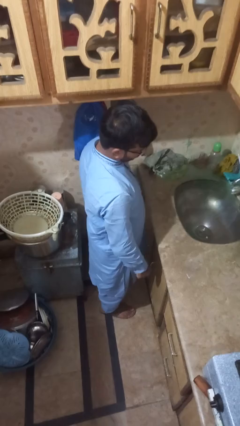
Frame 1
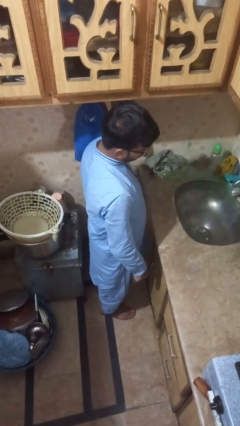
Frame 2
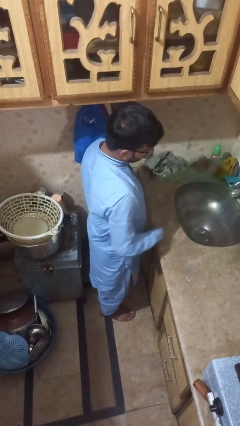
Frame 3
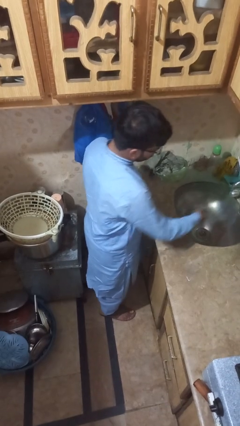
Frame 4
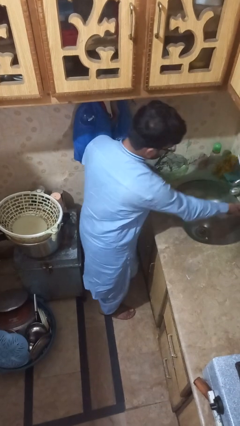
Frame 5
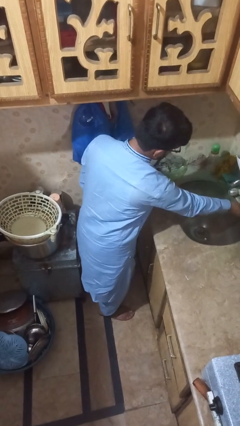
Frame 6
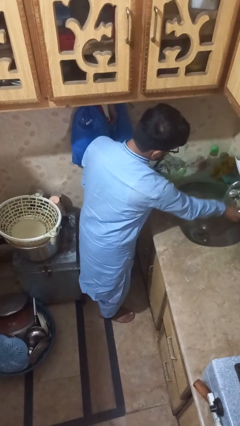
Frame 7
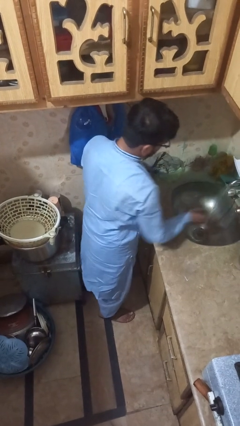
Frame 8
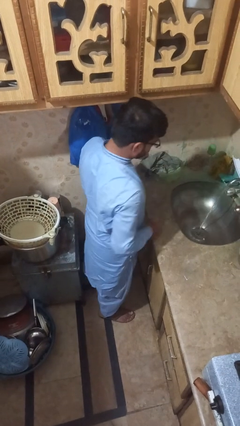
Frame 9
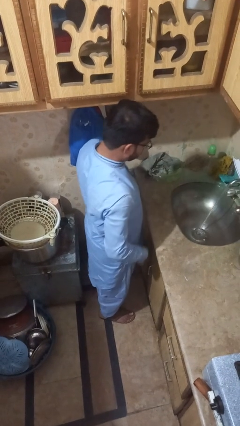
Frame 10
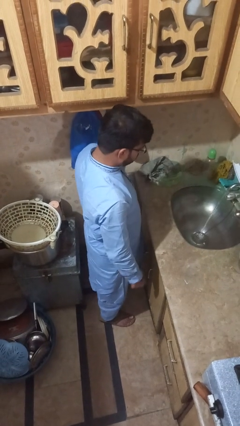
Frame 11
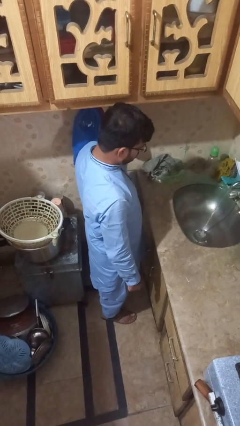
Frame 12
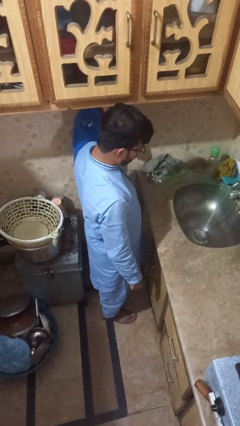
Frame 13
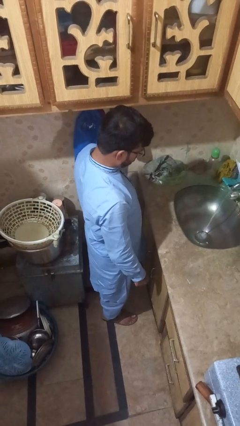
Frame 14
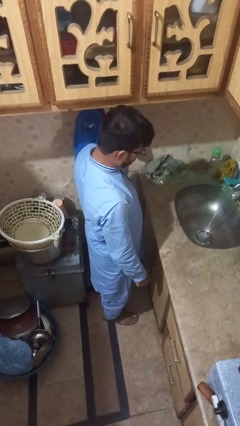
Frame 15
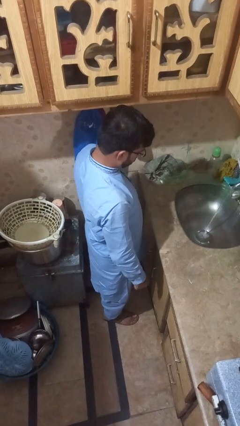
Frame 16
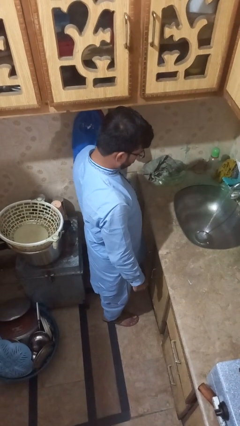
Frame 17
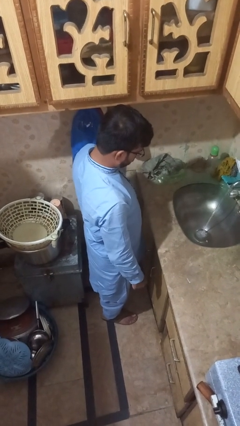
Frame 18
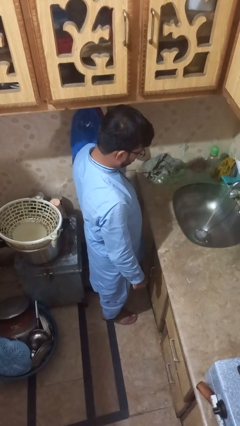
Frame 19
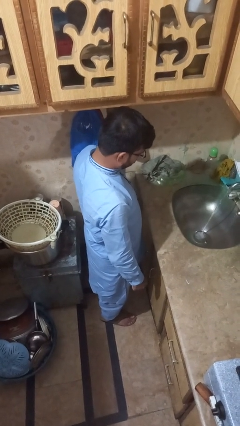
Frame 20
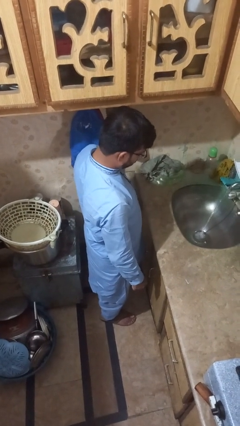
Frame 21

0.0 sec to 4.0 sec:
person turns on faucet

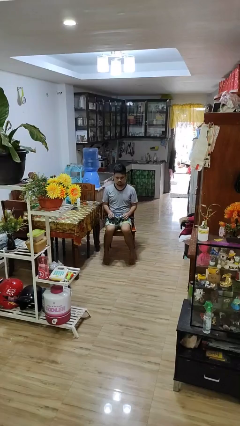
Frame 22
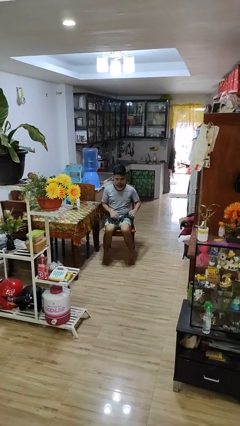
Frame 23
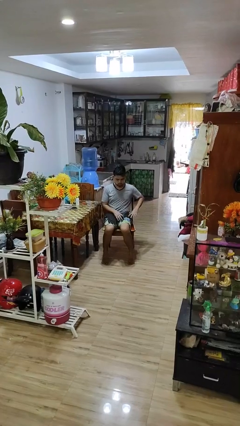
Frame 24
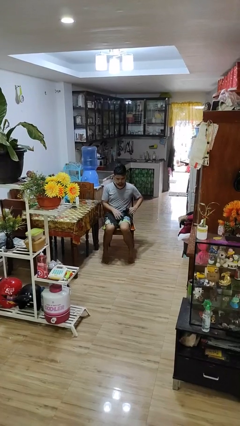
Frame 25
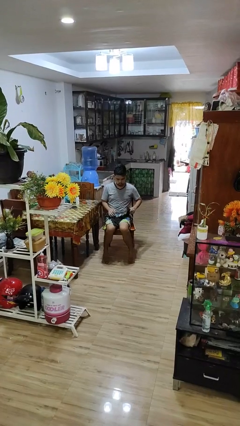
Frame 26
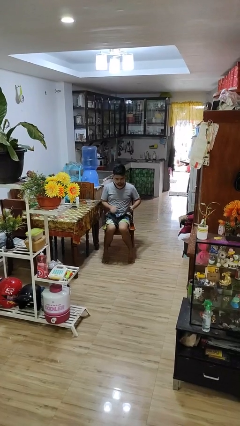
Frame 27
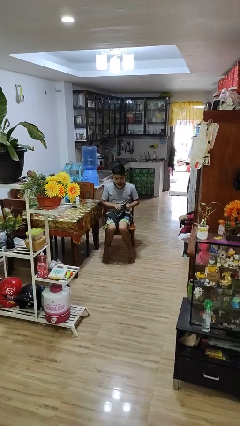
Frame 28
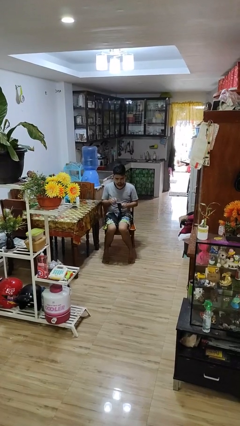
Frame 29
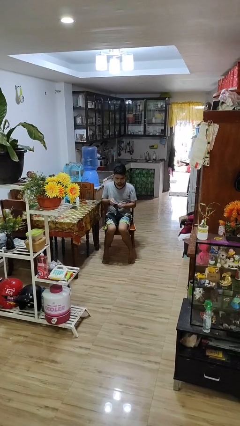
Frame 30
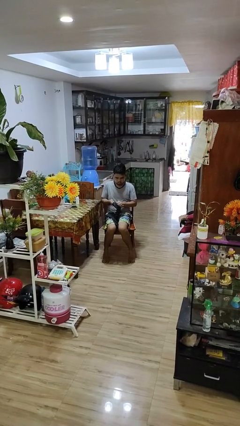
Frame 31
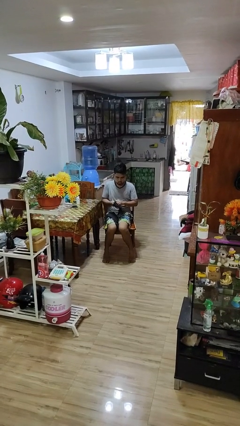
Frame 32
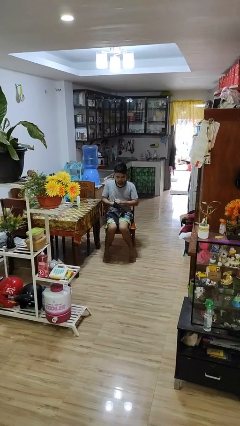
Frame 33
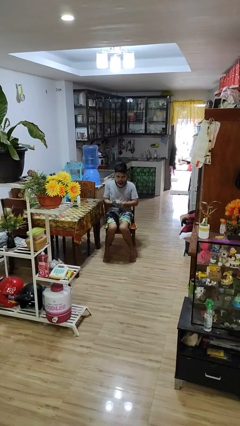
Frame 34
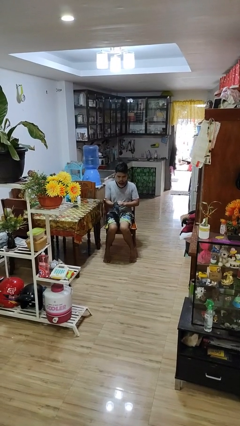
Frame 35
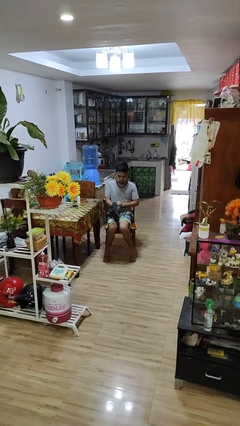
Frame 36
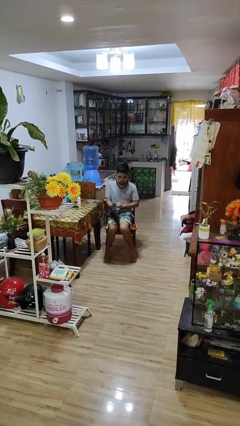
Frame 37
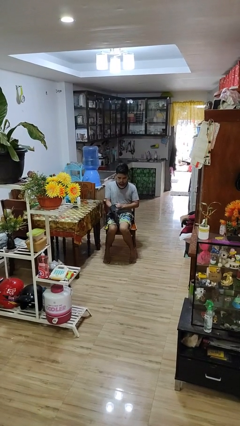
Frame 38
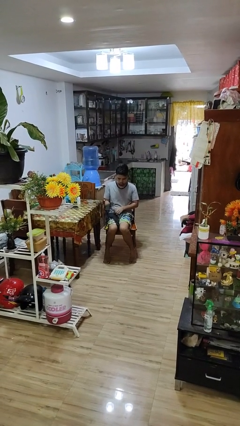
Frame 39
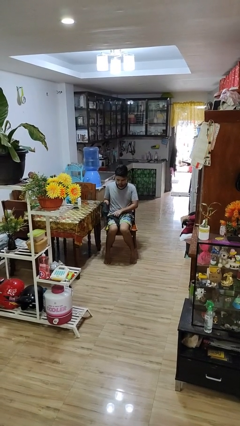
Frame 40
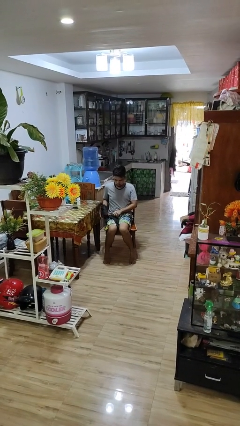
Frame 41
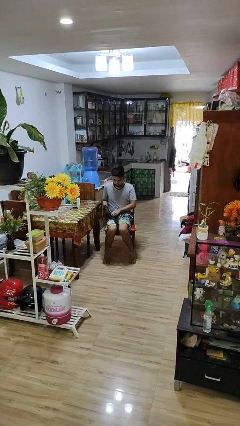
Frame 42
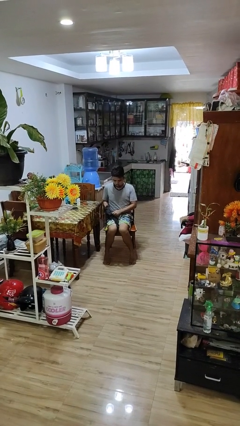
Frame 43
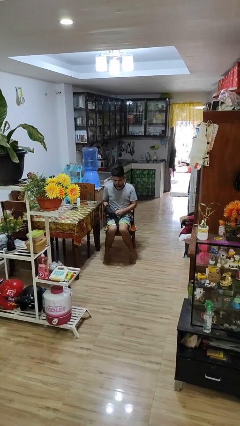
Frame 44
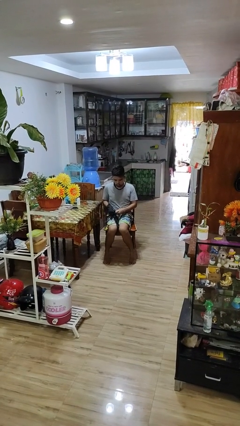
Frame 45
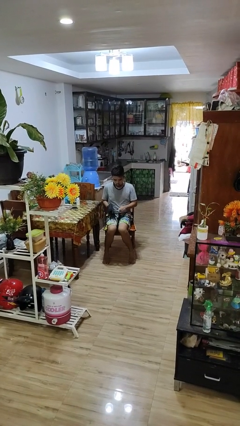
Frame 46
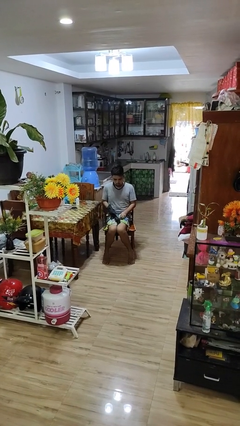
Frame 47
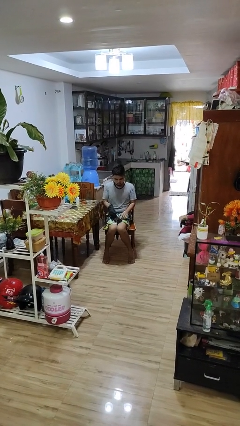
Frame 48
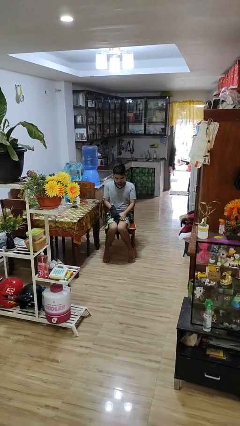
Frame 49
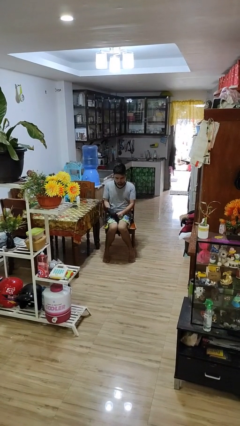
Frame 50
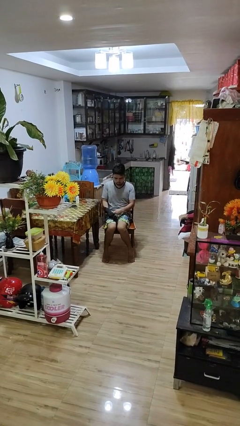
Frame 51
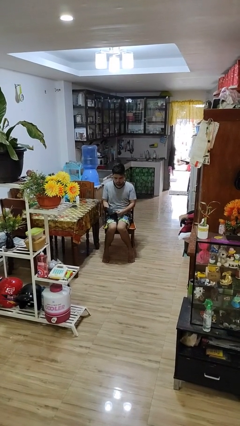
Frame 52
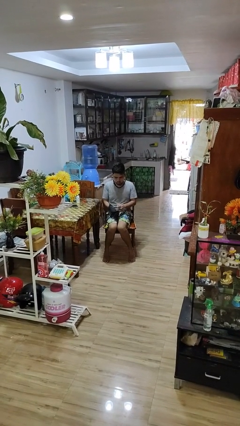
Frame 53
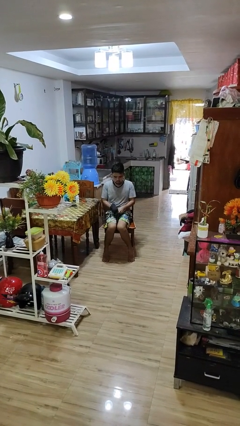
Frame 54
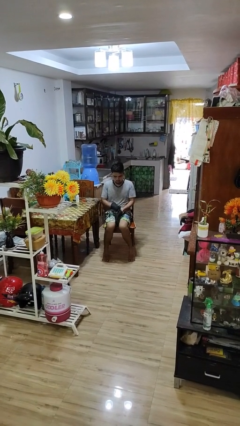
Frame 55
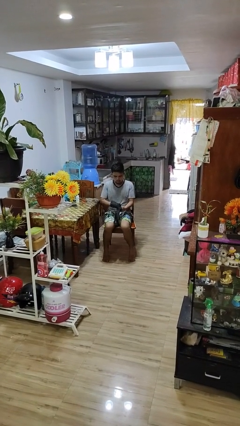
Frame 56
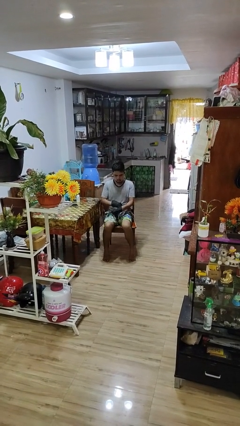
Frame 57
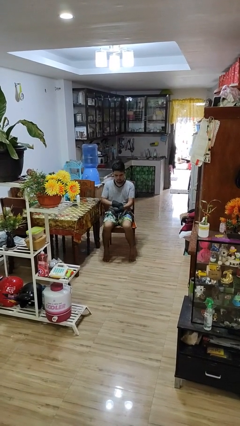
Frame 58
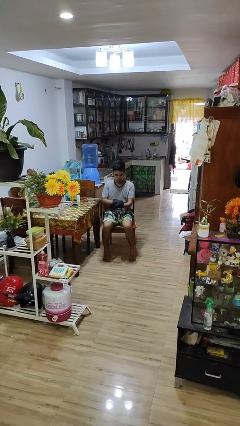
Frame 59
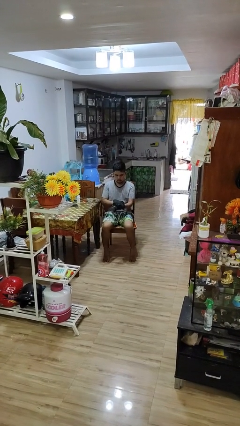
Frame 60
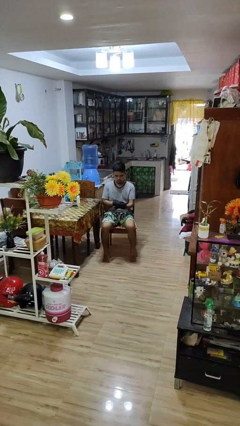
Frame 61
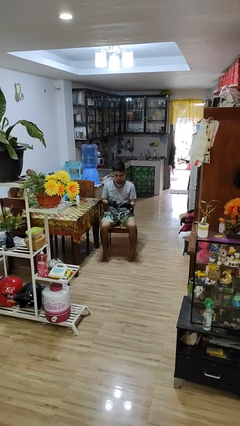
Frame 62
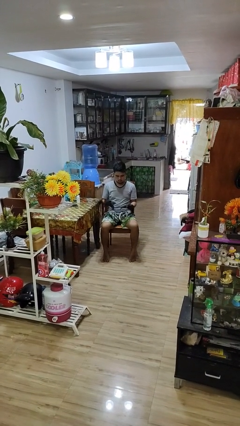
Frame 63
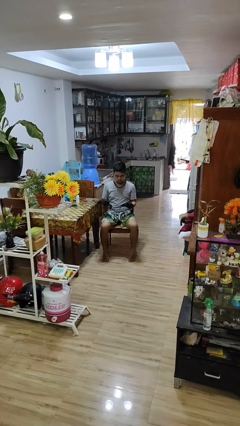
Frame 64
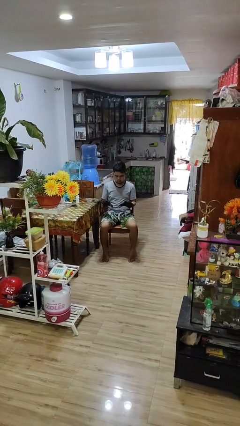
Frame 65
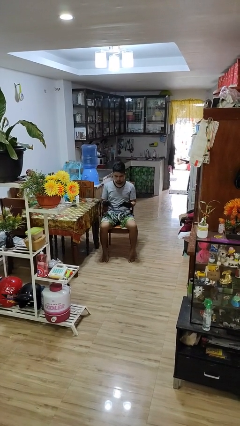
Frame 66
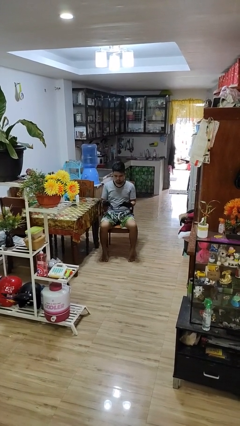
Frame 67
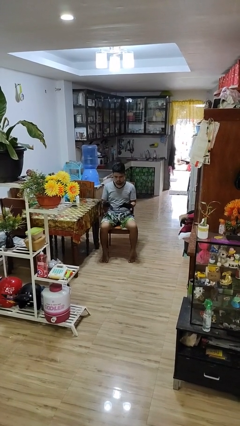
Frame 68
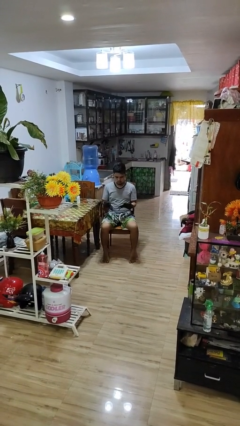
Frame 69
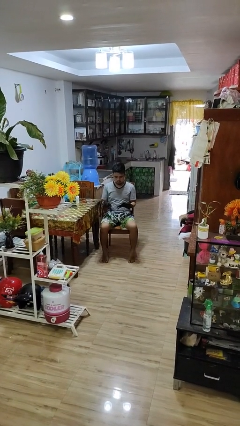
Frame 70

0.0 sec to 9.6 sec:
person puts on gloves

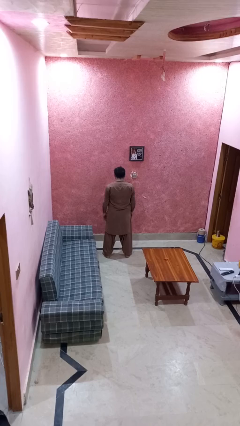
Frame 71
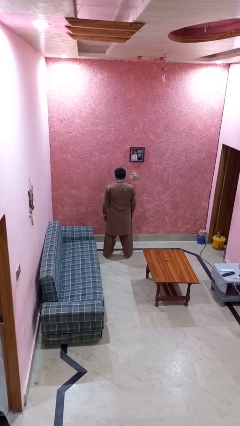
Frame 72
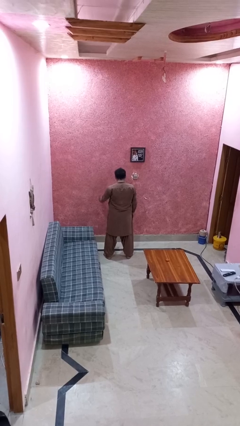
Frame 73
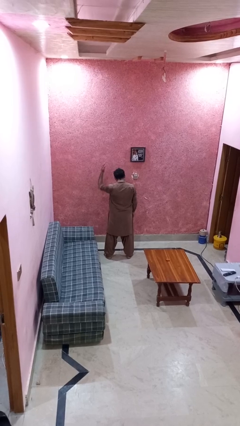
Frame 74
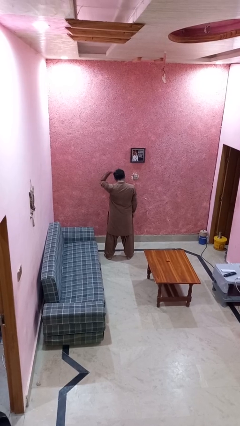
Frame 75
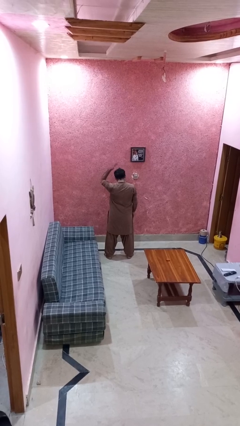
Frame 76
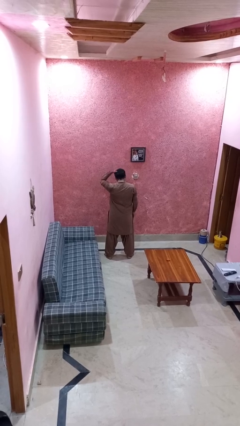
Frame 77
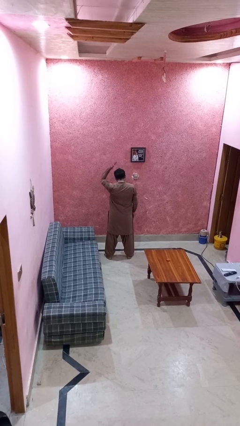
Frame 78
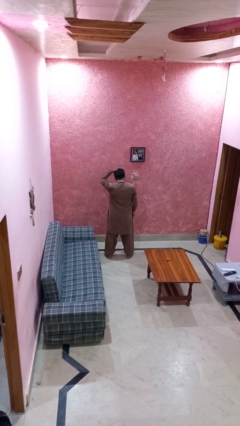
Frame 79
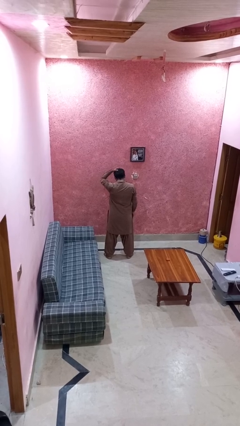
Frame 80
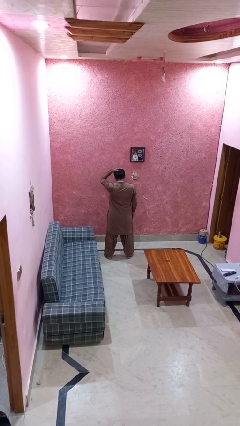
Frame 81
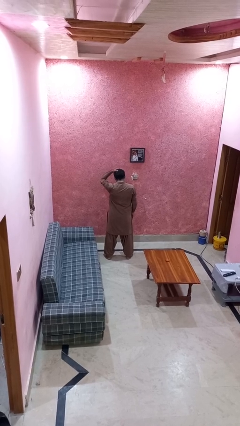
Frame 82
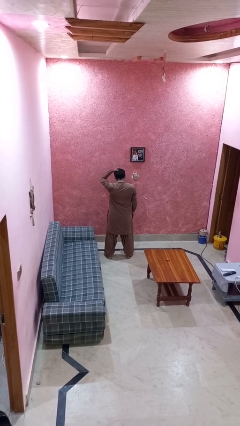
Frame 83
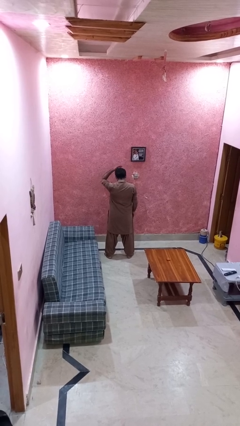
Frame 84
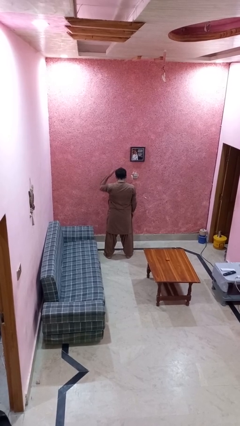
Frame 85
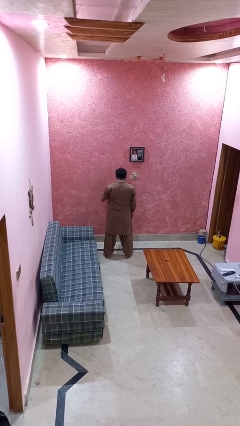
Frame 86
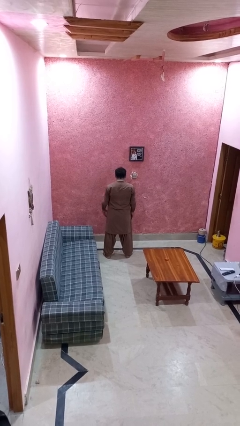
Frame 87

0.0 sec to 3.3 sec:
person pats head

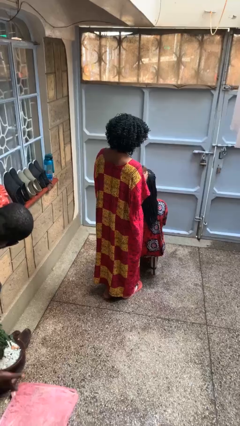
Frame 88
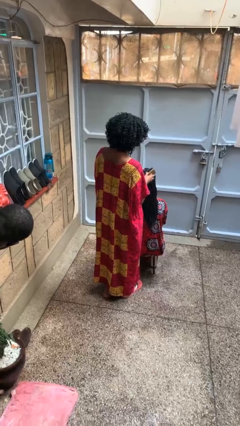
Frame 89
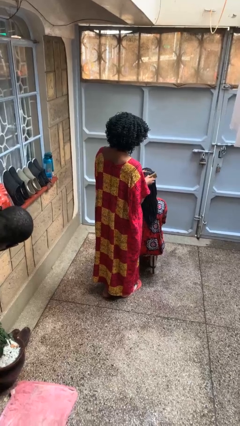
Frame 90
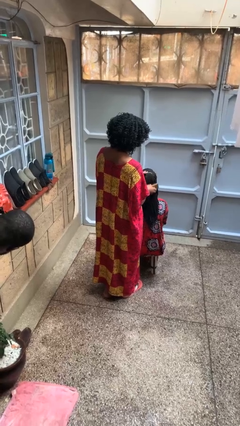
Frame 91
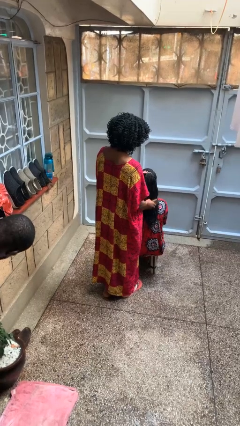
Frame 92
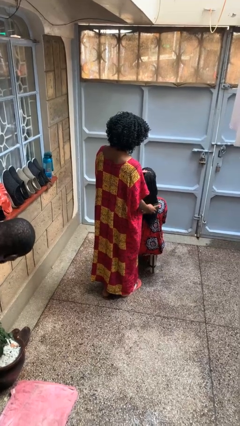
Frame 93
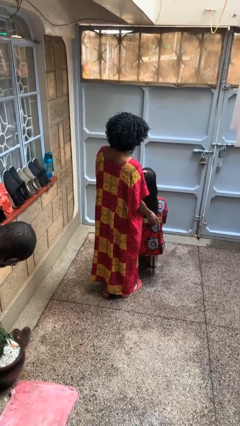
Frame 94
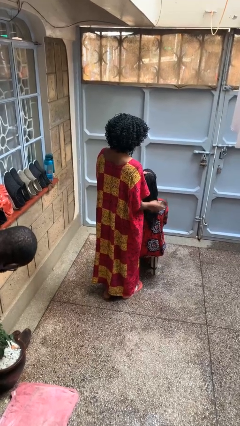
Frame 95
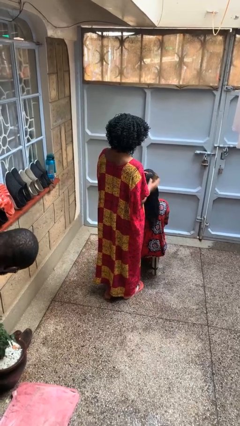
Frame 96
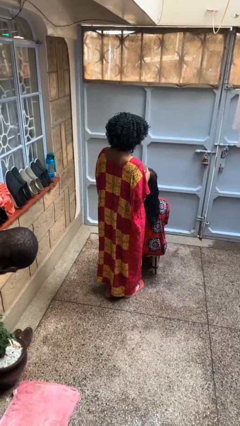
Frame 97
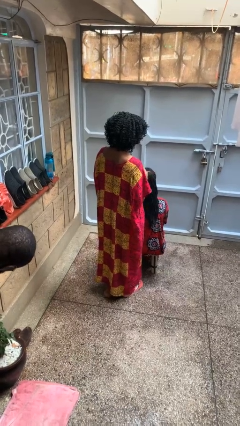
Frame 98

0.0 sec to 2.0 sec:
person brushes hair of person
